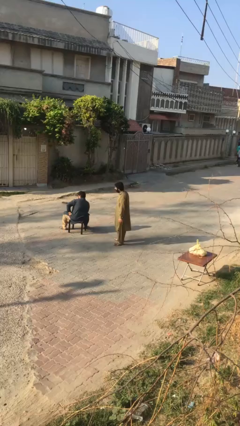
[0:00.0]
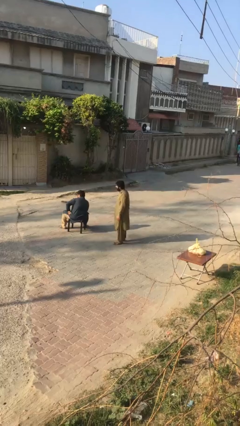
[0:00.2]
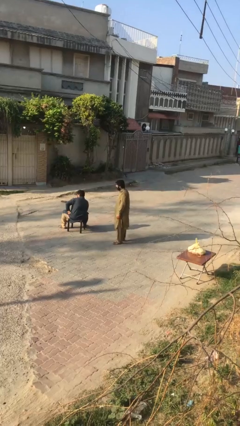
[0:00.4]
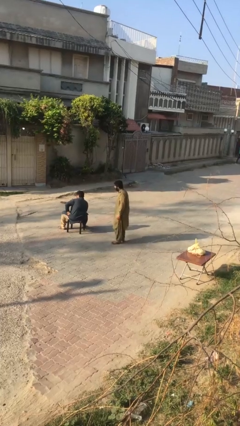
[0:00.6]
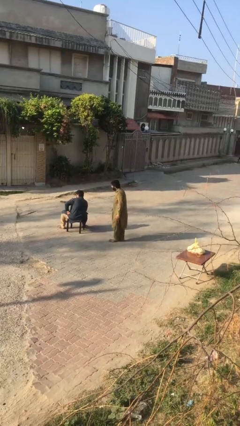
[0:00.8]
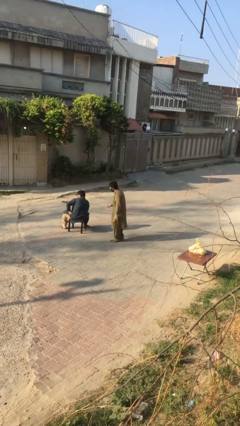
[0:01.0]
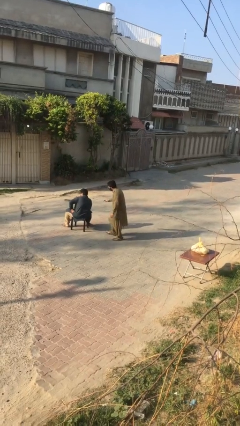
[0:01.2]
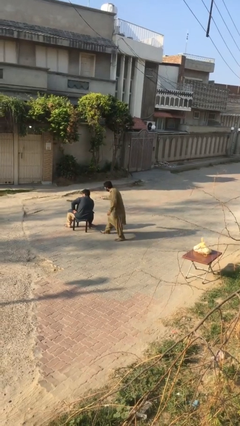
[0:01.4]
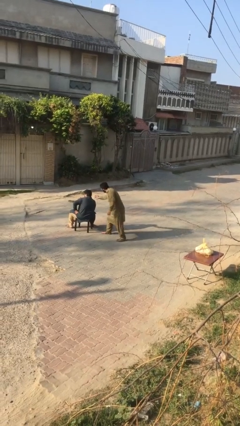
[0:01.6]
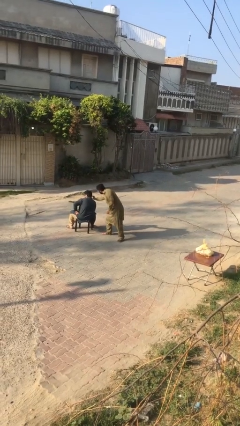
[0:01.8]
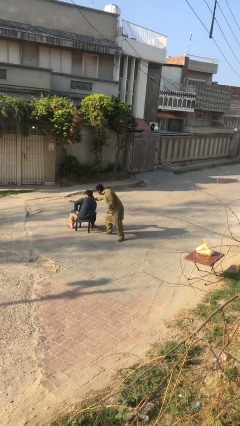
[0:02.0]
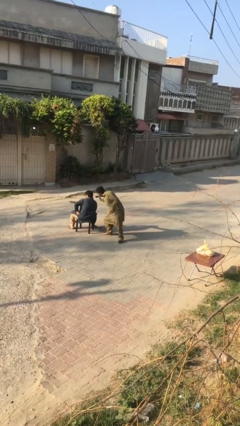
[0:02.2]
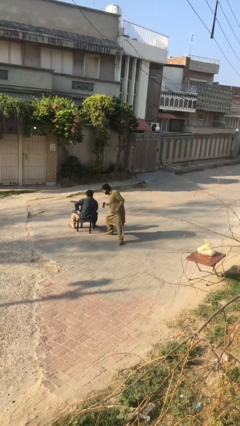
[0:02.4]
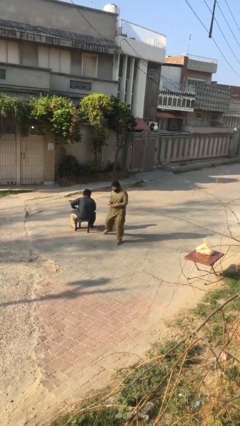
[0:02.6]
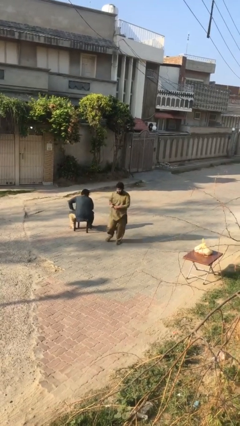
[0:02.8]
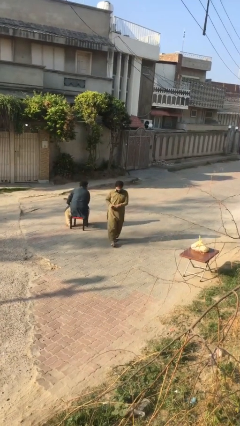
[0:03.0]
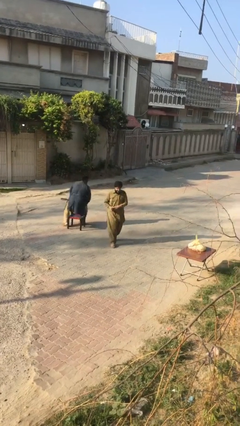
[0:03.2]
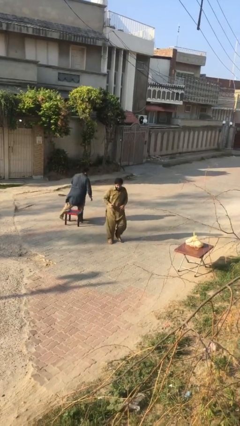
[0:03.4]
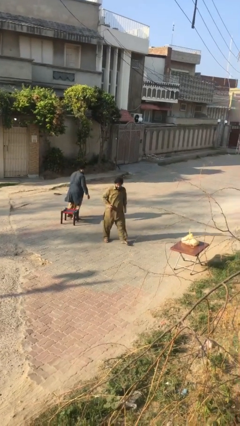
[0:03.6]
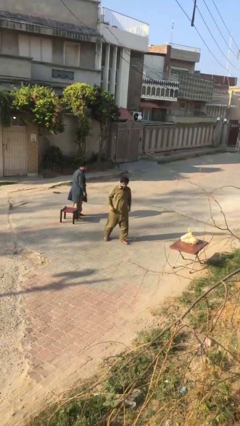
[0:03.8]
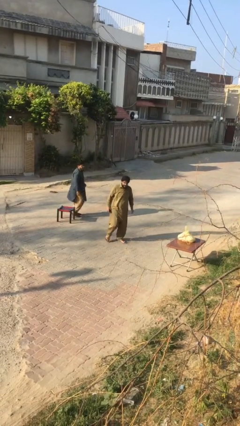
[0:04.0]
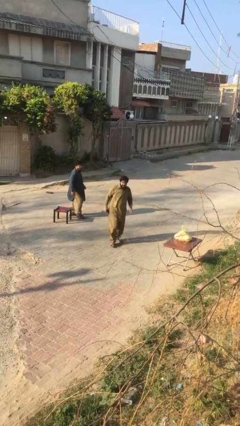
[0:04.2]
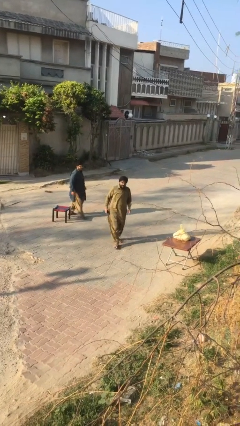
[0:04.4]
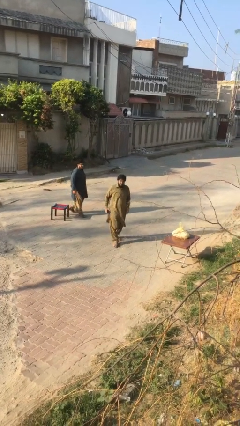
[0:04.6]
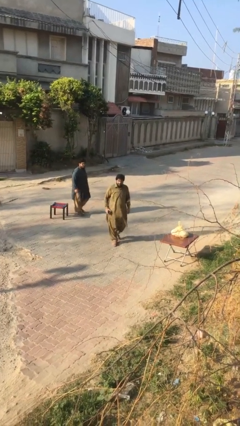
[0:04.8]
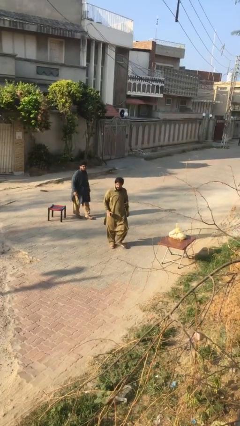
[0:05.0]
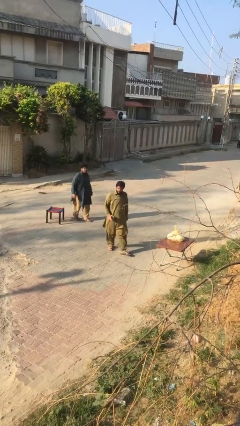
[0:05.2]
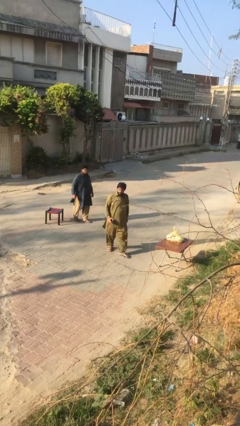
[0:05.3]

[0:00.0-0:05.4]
person steals object from person

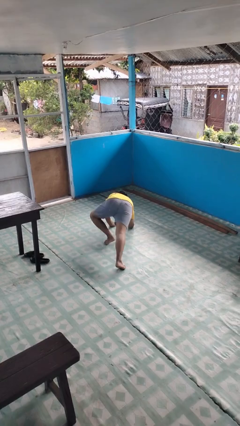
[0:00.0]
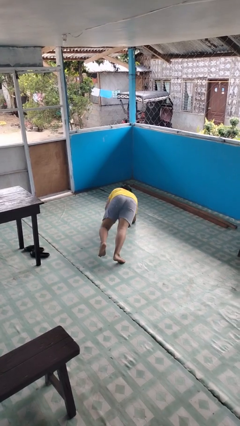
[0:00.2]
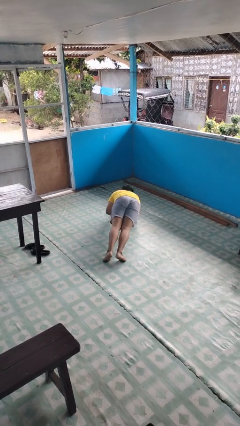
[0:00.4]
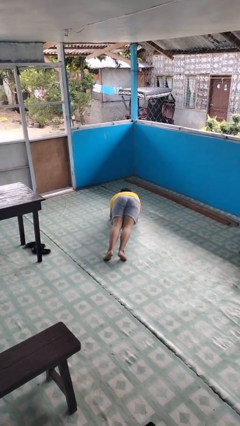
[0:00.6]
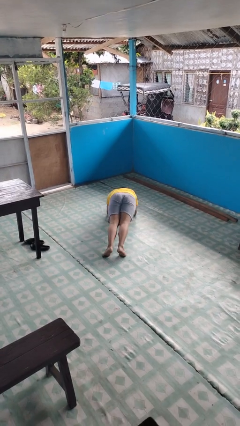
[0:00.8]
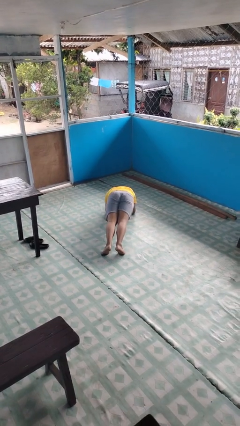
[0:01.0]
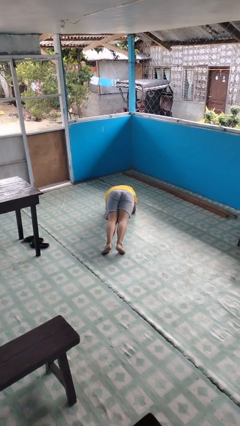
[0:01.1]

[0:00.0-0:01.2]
person exercises with plank

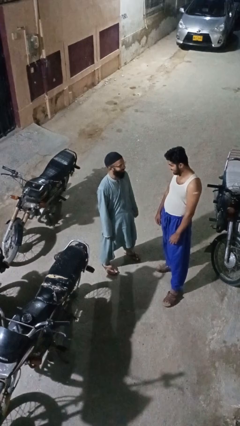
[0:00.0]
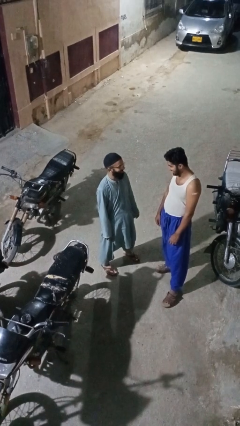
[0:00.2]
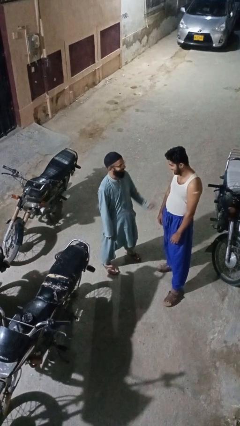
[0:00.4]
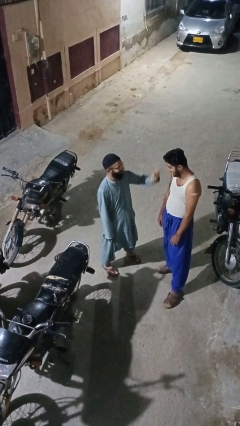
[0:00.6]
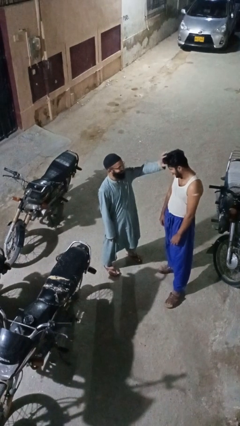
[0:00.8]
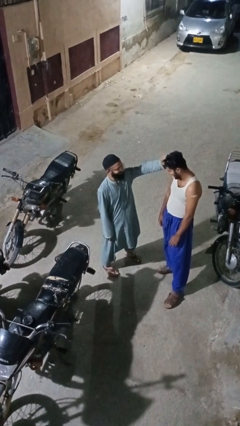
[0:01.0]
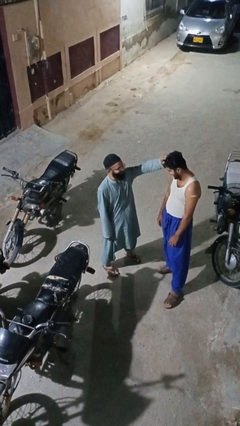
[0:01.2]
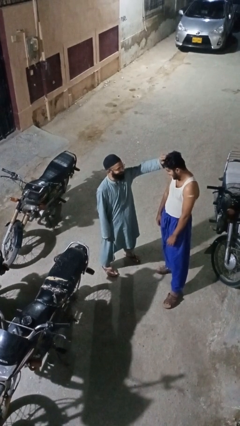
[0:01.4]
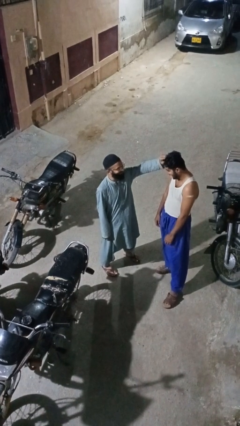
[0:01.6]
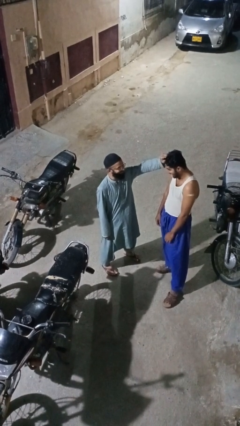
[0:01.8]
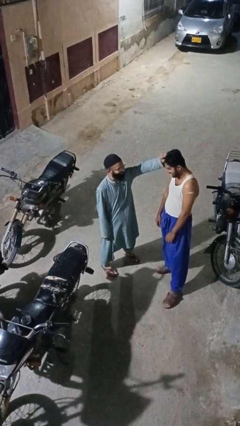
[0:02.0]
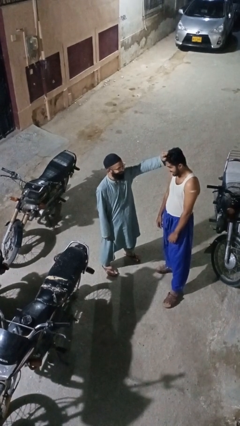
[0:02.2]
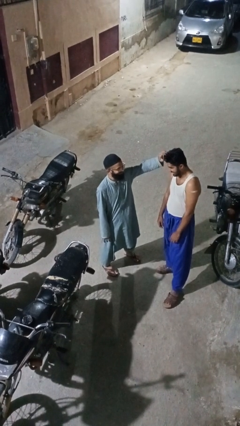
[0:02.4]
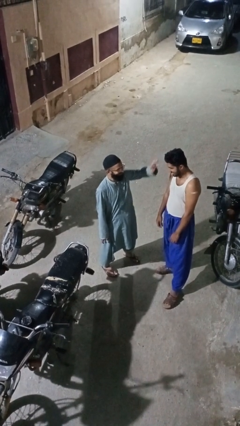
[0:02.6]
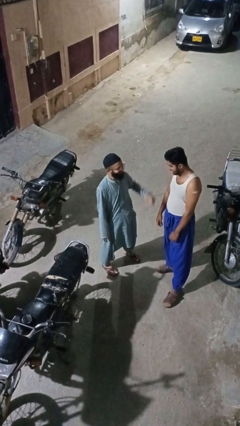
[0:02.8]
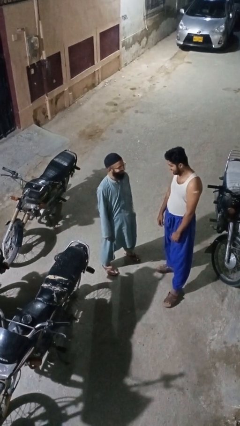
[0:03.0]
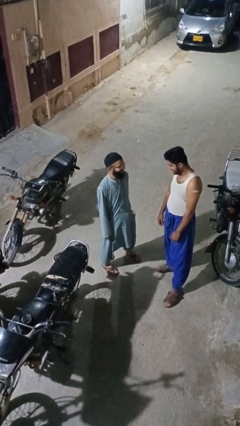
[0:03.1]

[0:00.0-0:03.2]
person grabs person by hair

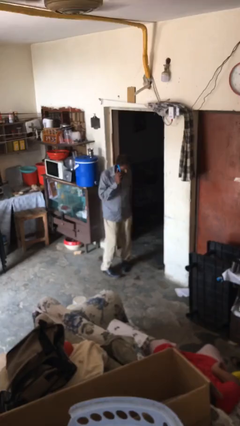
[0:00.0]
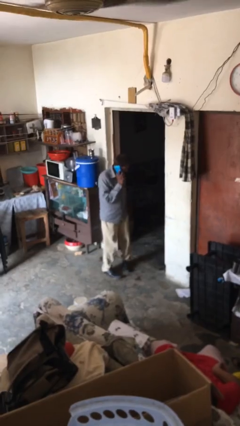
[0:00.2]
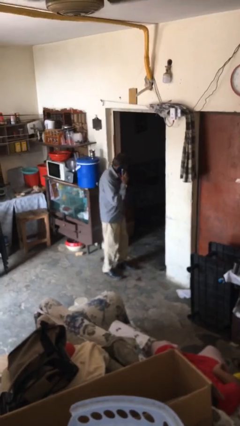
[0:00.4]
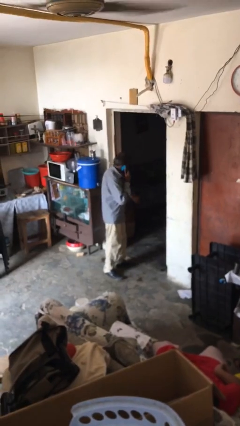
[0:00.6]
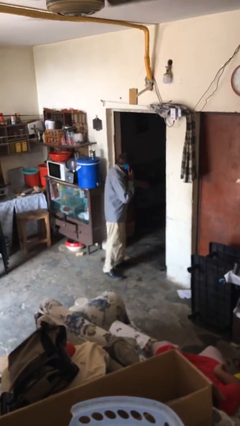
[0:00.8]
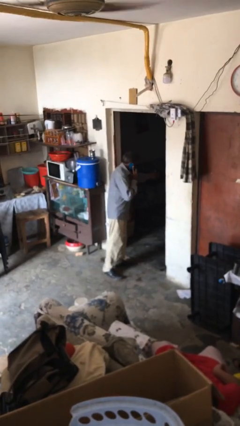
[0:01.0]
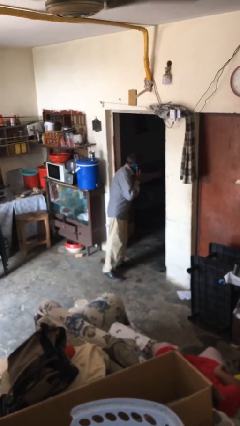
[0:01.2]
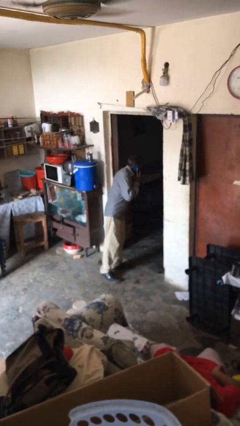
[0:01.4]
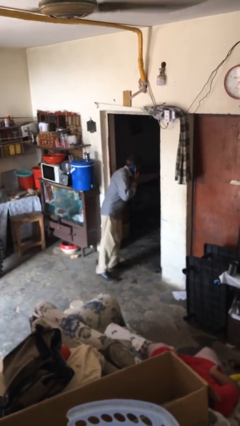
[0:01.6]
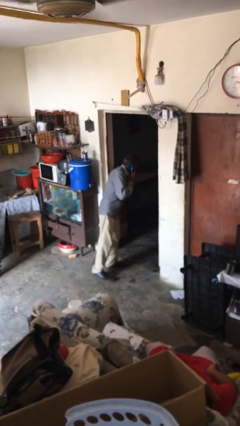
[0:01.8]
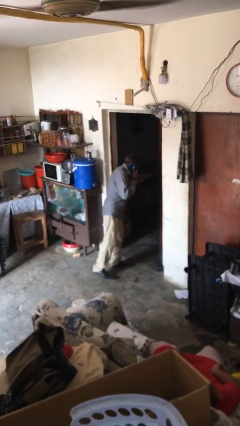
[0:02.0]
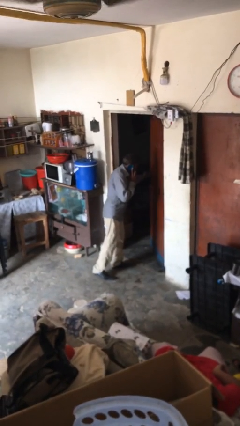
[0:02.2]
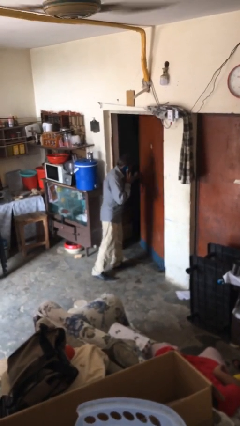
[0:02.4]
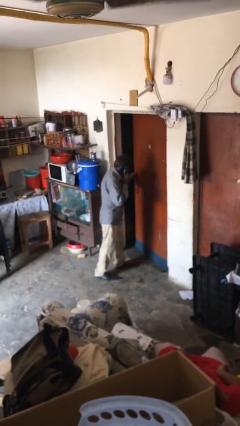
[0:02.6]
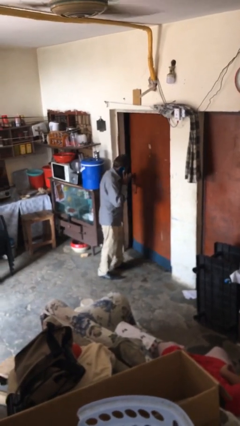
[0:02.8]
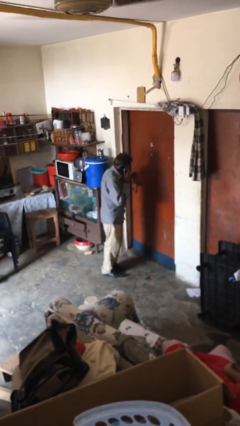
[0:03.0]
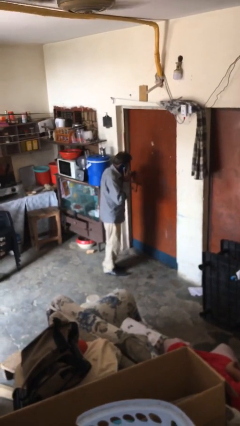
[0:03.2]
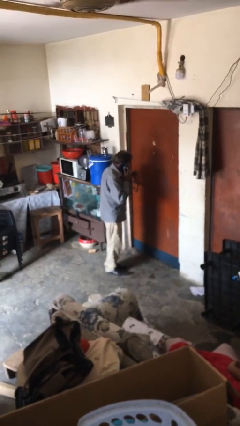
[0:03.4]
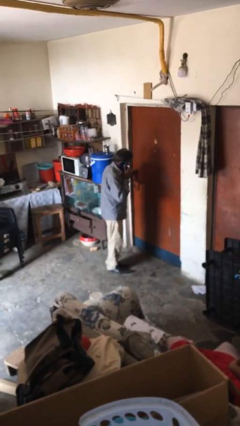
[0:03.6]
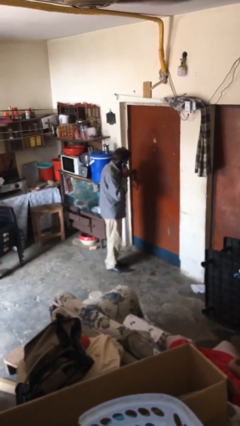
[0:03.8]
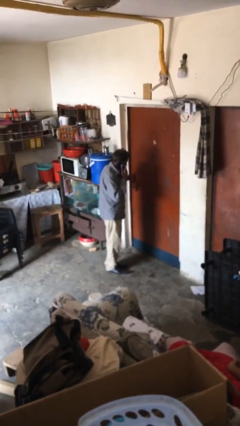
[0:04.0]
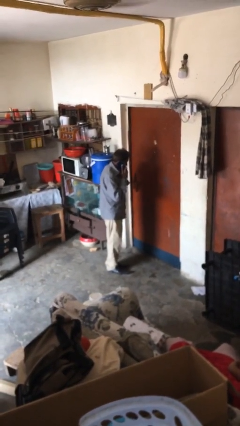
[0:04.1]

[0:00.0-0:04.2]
person closes facility door

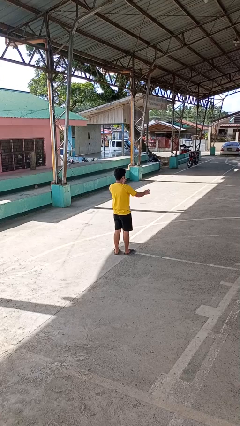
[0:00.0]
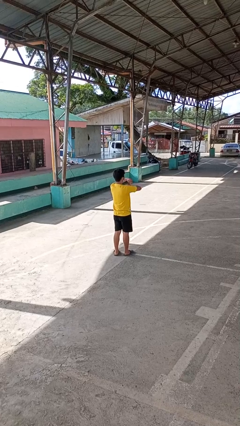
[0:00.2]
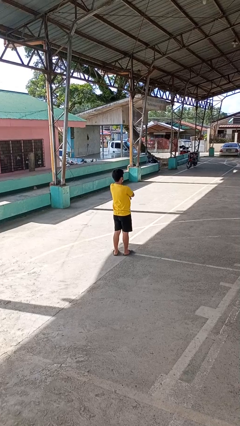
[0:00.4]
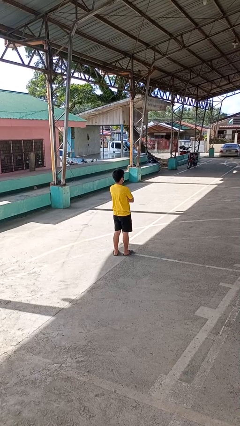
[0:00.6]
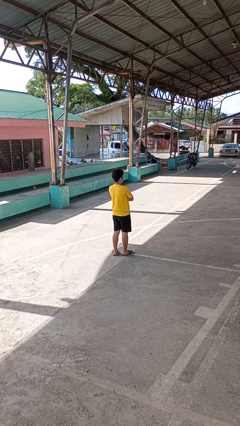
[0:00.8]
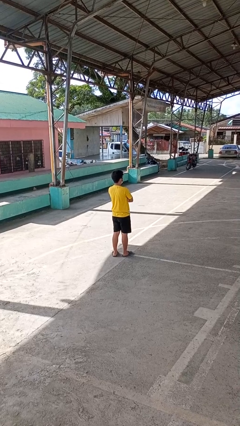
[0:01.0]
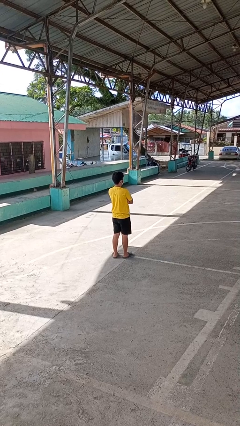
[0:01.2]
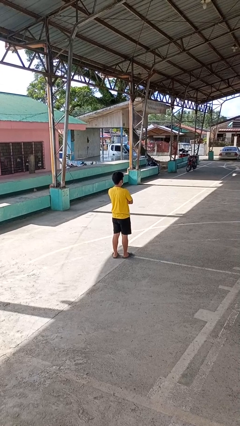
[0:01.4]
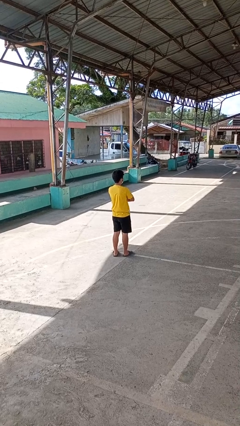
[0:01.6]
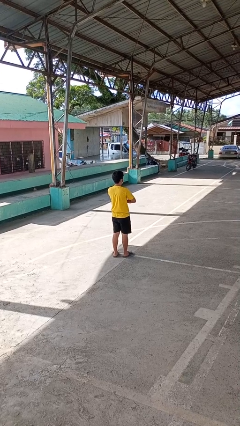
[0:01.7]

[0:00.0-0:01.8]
person crosses arms

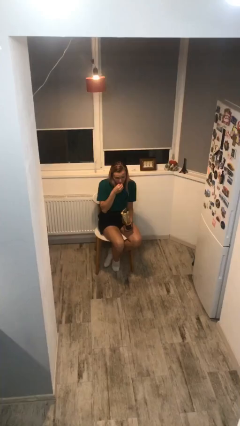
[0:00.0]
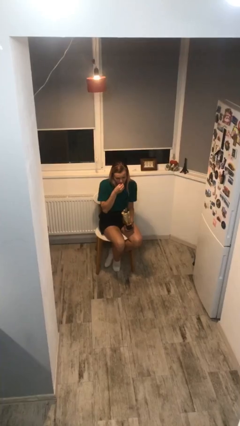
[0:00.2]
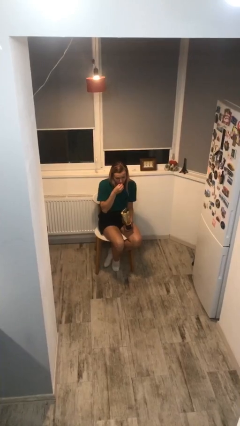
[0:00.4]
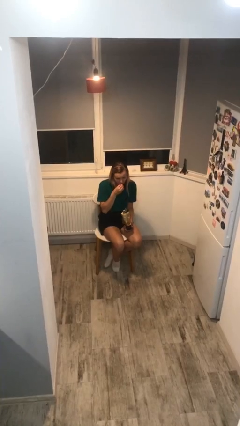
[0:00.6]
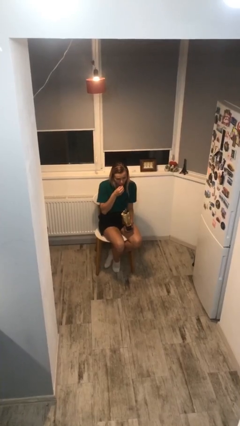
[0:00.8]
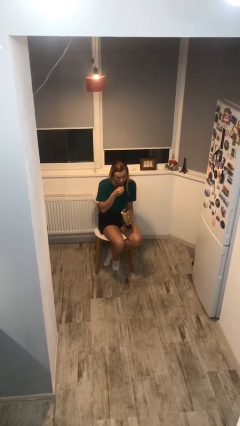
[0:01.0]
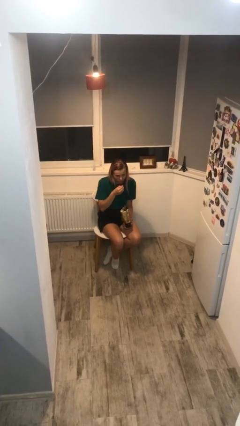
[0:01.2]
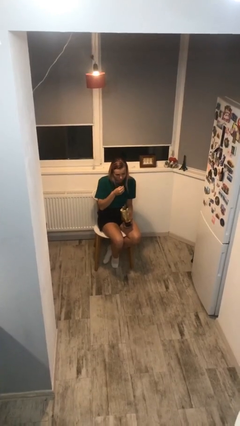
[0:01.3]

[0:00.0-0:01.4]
person eats snack from bag

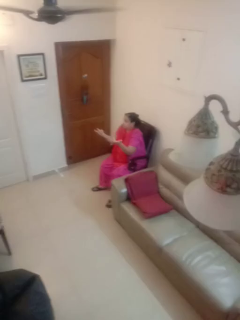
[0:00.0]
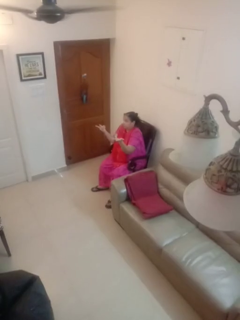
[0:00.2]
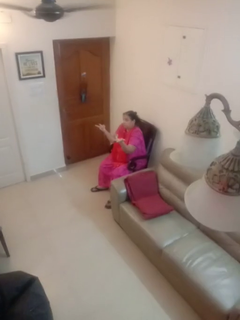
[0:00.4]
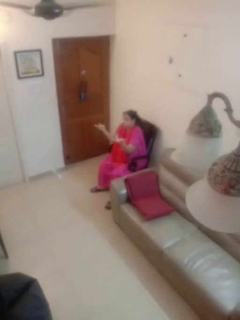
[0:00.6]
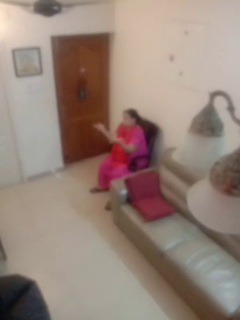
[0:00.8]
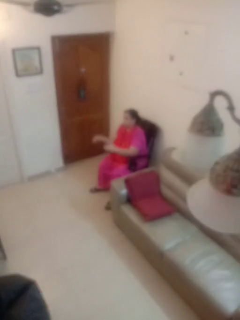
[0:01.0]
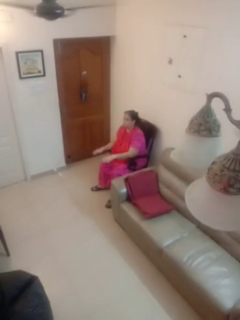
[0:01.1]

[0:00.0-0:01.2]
person shrugs
